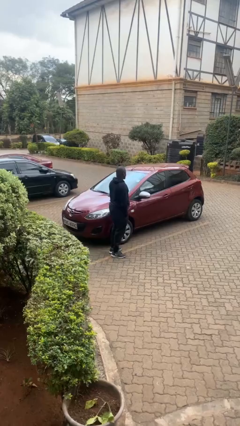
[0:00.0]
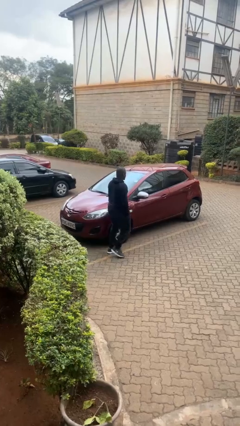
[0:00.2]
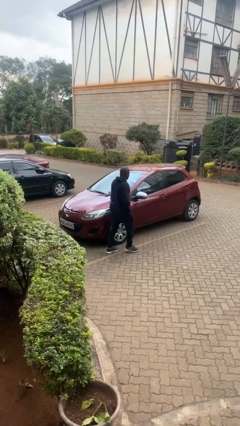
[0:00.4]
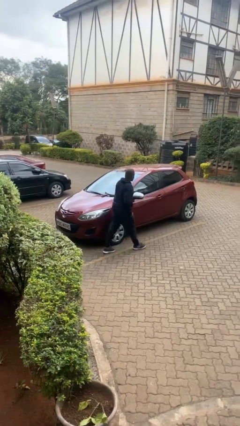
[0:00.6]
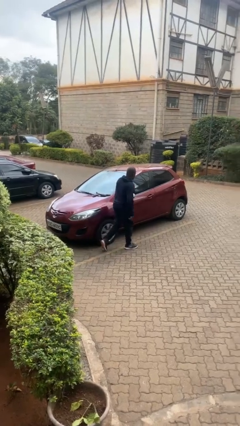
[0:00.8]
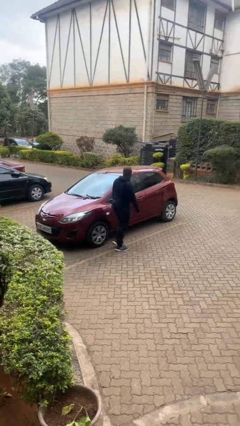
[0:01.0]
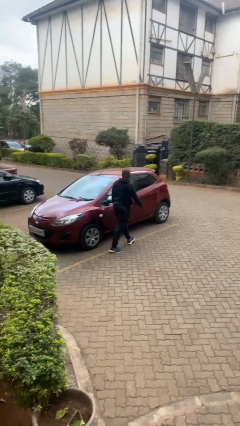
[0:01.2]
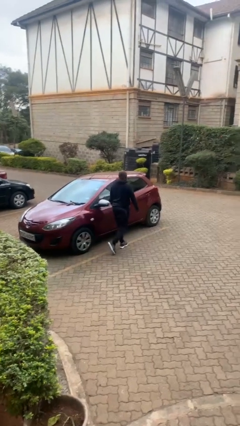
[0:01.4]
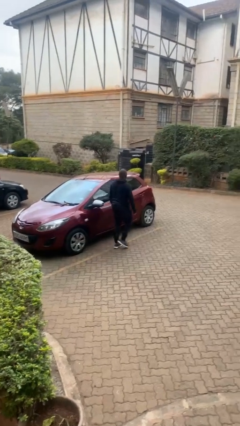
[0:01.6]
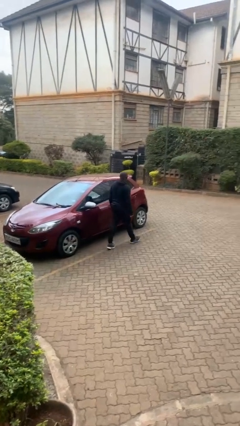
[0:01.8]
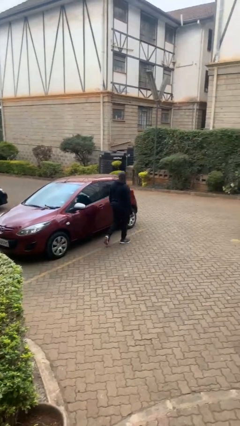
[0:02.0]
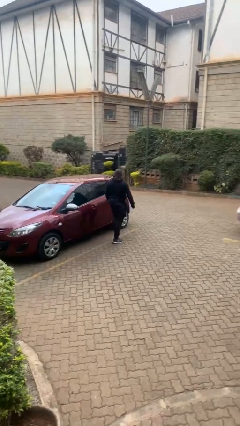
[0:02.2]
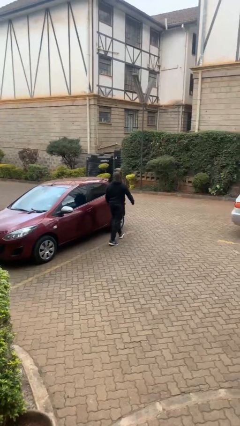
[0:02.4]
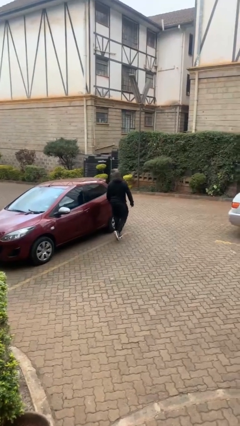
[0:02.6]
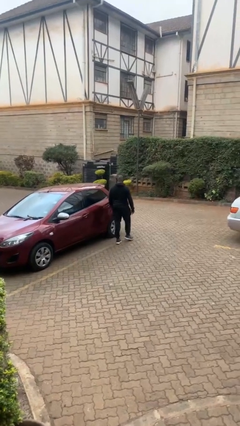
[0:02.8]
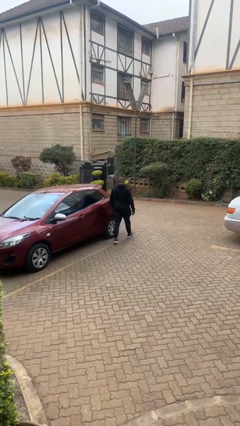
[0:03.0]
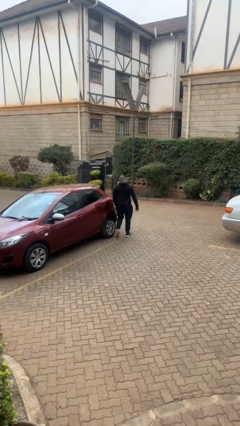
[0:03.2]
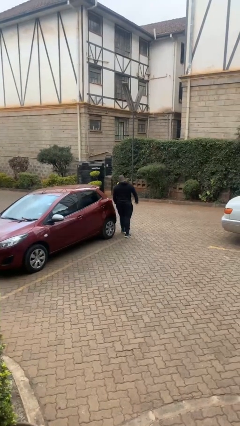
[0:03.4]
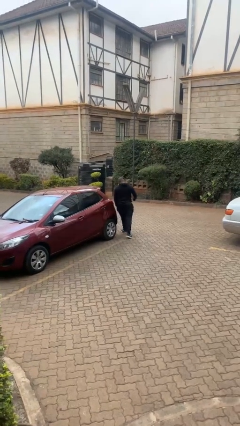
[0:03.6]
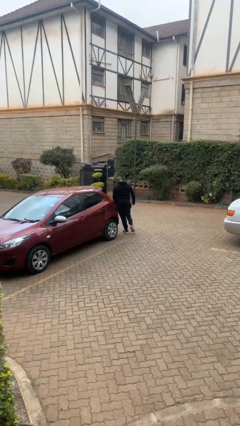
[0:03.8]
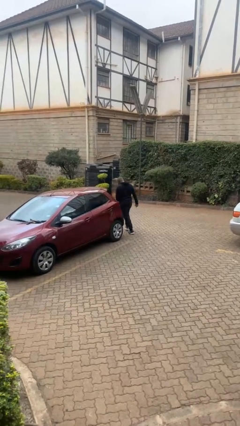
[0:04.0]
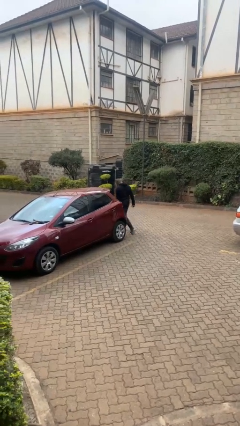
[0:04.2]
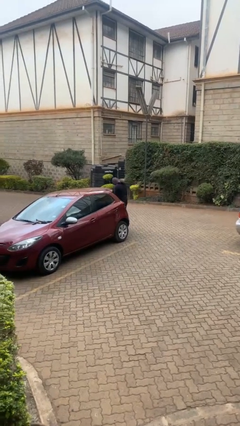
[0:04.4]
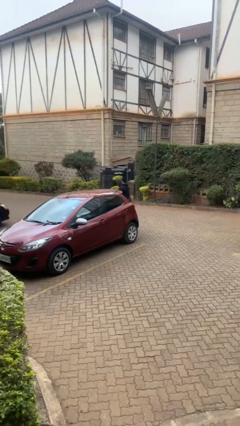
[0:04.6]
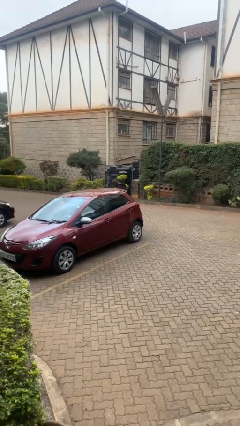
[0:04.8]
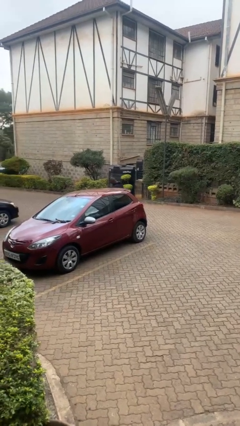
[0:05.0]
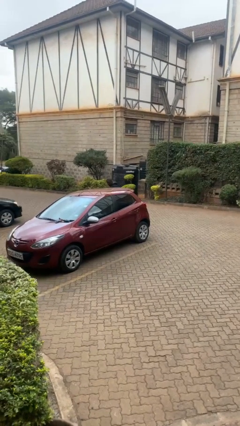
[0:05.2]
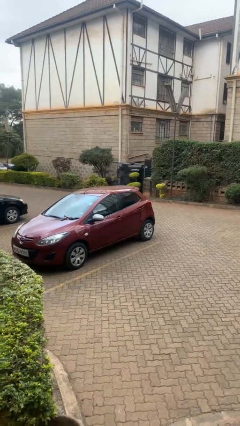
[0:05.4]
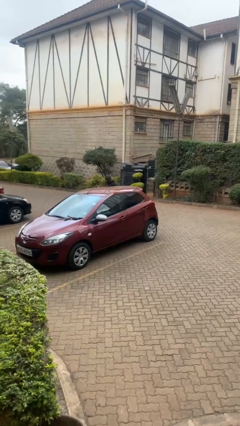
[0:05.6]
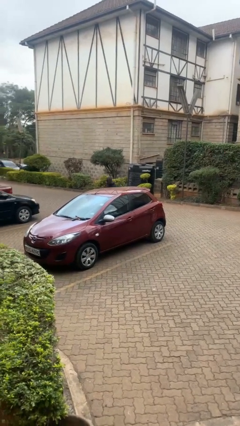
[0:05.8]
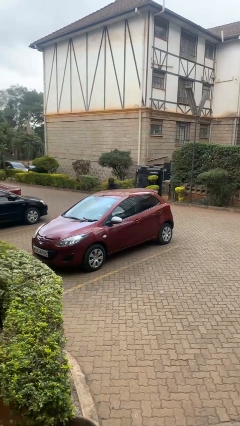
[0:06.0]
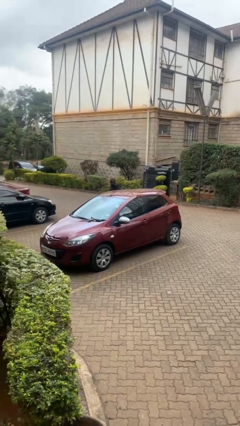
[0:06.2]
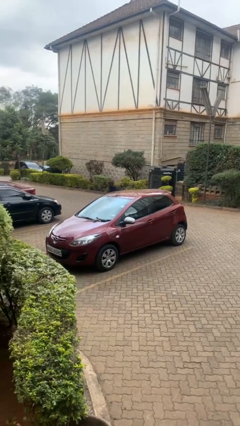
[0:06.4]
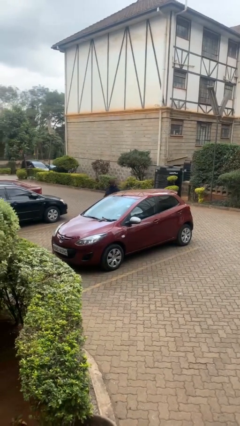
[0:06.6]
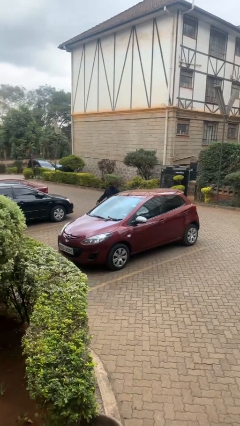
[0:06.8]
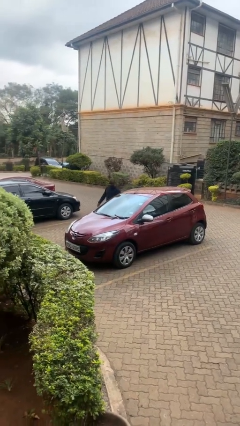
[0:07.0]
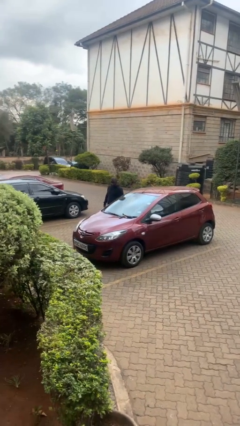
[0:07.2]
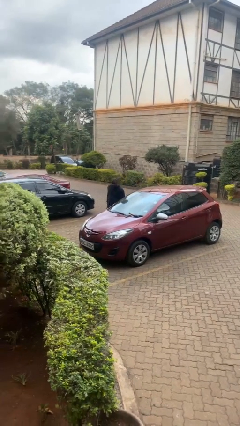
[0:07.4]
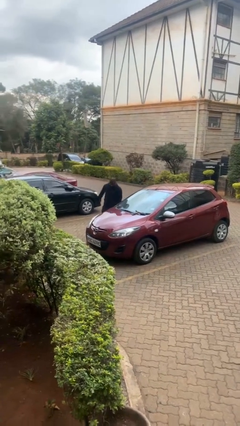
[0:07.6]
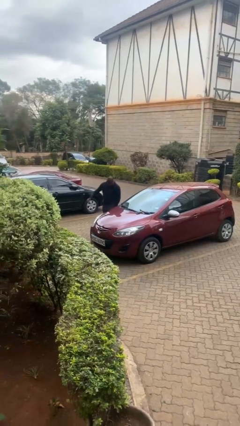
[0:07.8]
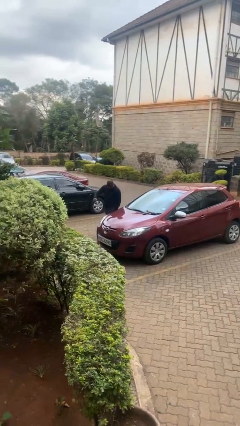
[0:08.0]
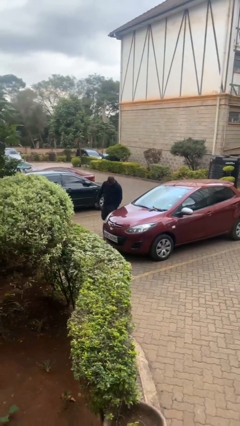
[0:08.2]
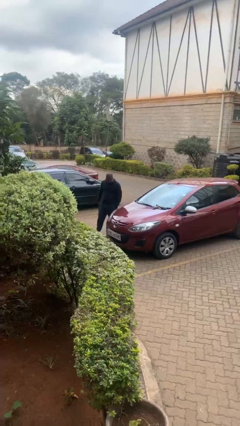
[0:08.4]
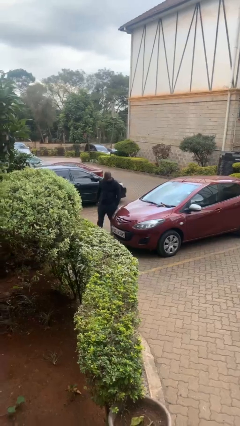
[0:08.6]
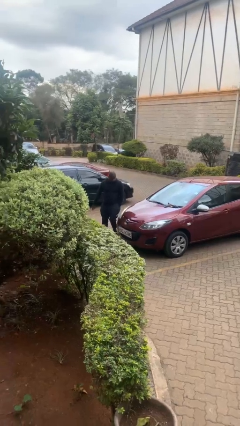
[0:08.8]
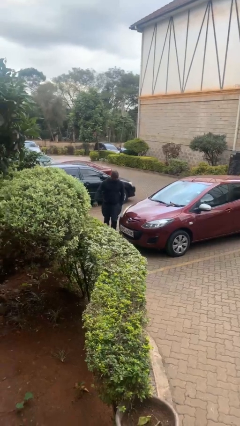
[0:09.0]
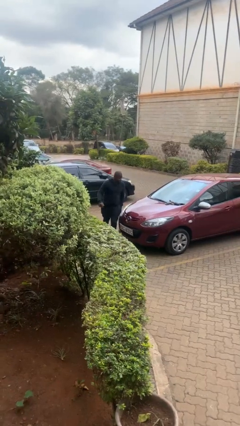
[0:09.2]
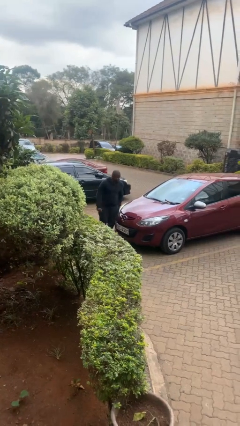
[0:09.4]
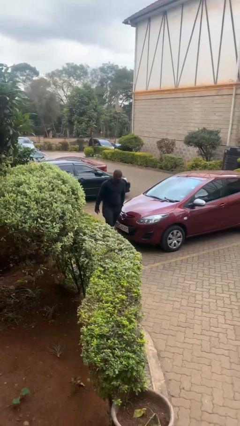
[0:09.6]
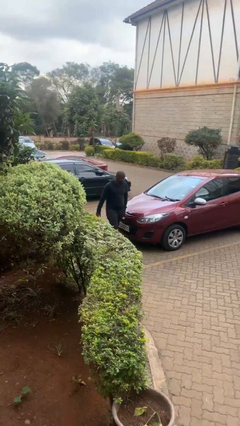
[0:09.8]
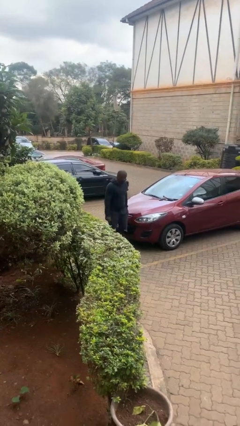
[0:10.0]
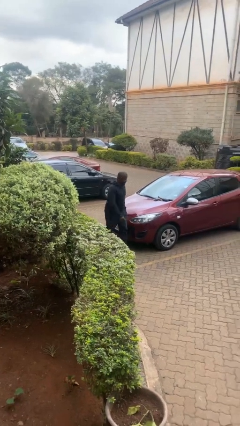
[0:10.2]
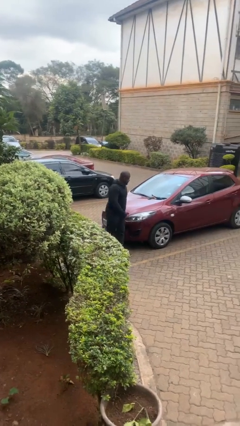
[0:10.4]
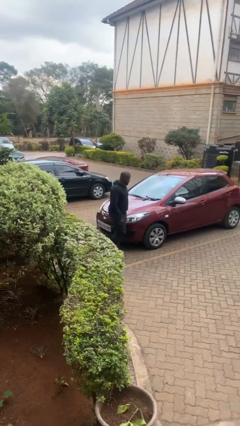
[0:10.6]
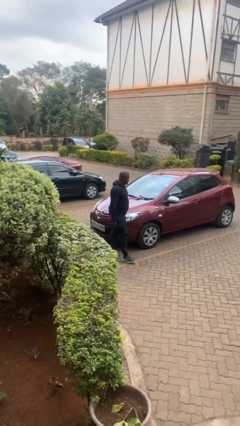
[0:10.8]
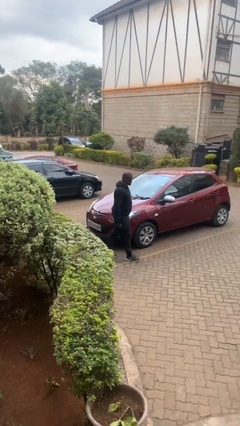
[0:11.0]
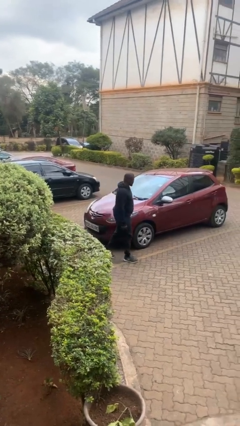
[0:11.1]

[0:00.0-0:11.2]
person walks around car

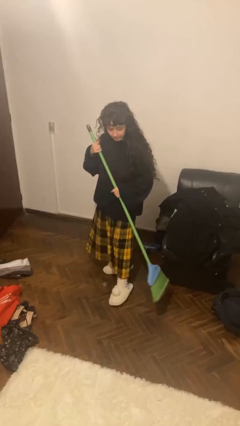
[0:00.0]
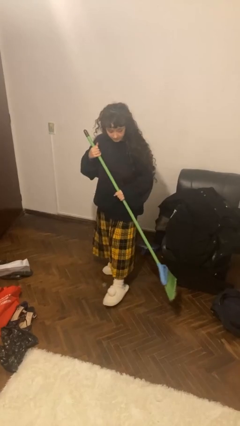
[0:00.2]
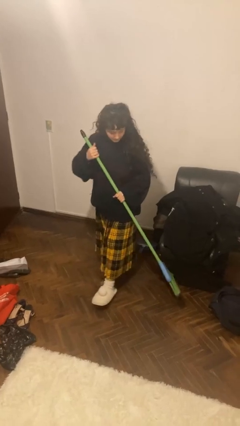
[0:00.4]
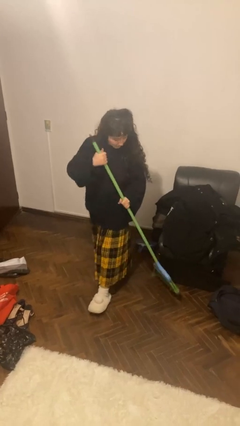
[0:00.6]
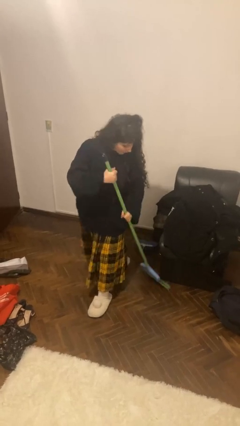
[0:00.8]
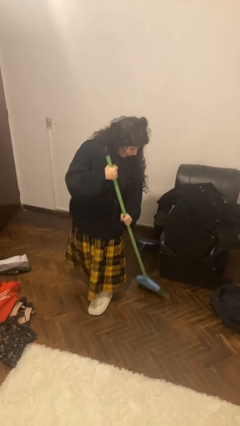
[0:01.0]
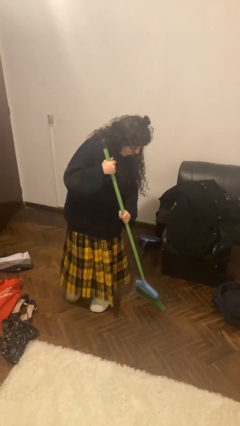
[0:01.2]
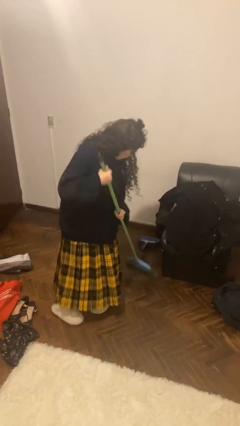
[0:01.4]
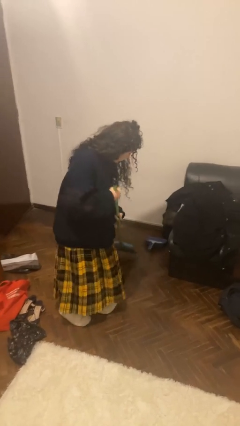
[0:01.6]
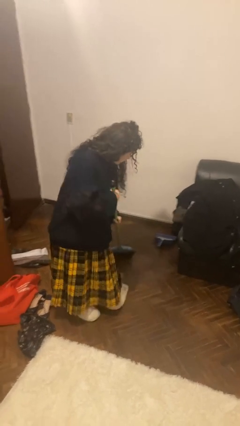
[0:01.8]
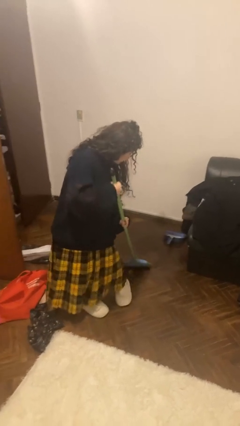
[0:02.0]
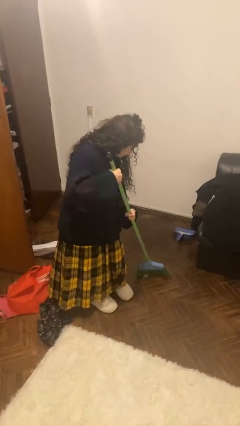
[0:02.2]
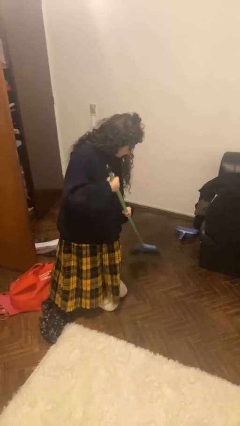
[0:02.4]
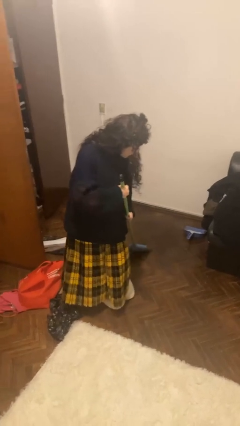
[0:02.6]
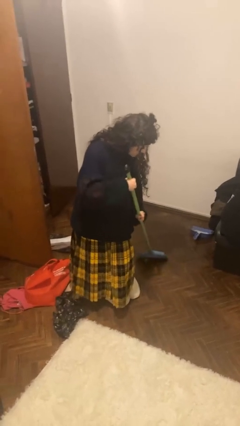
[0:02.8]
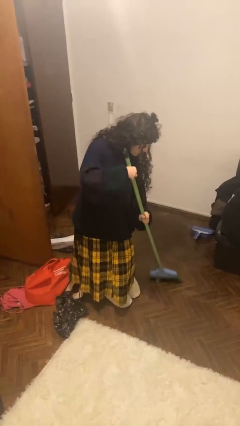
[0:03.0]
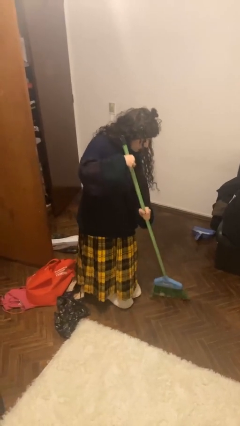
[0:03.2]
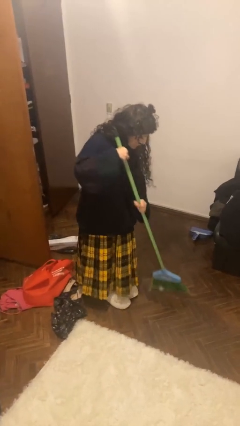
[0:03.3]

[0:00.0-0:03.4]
person sweeps floor

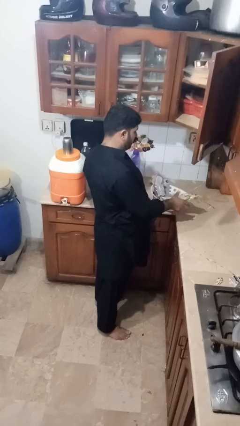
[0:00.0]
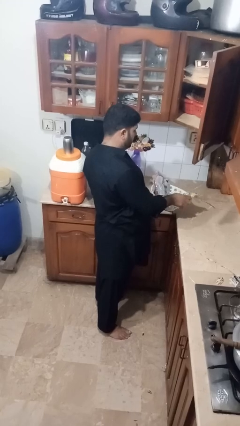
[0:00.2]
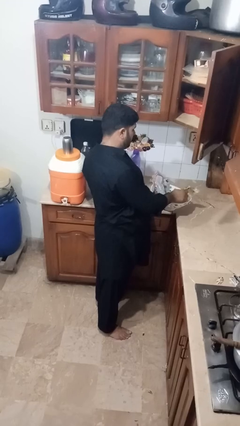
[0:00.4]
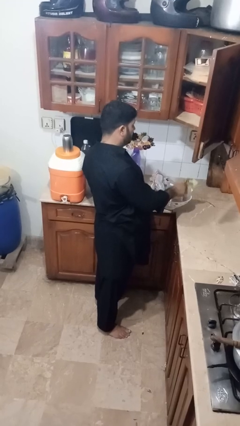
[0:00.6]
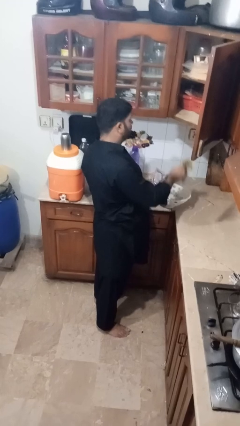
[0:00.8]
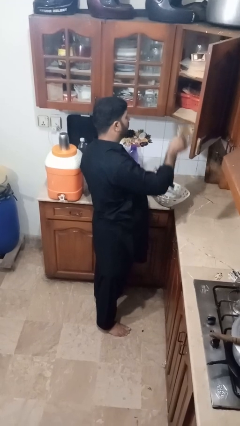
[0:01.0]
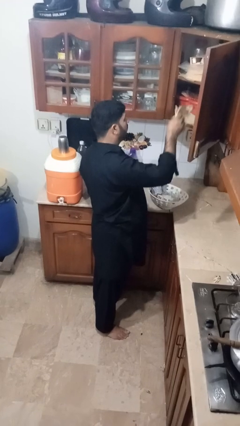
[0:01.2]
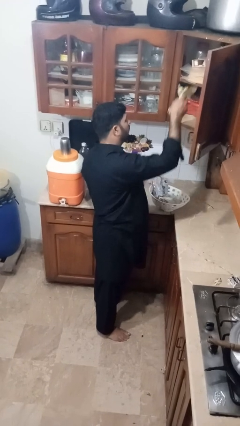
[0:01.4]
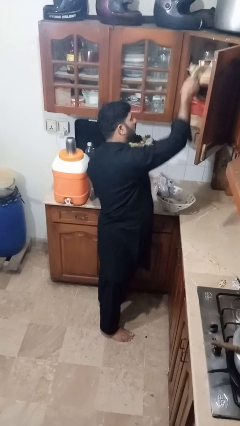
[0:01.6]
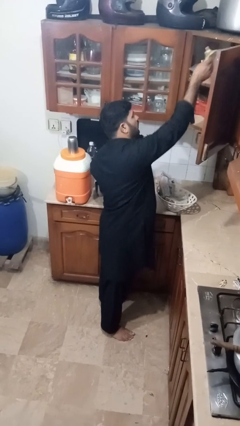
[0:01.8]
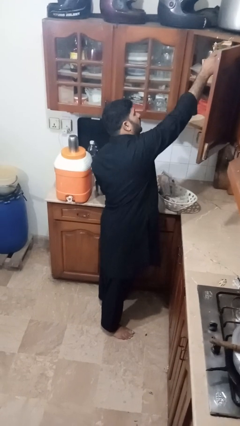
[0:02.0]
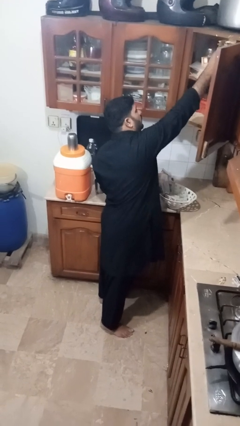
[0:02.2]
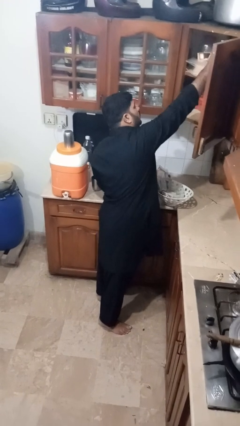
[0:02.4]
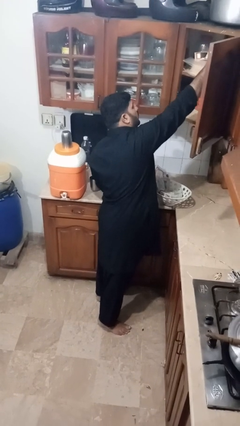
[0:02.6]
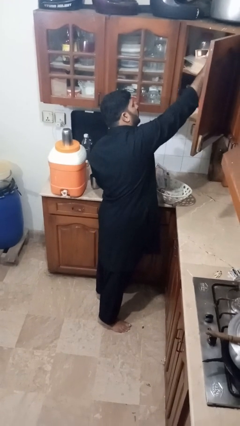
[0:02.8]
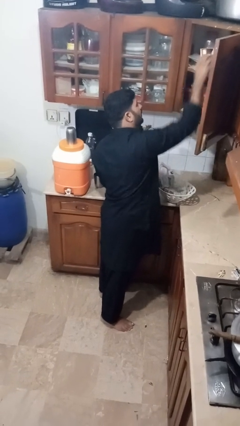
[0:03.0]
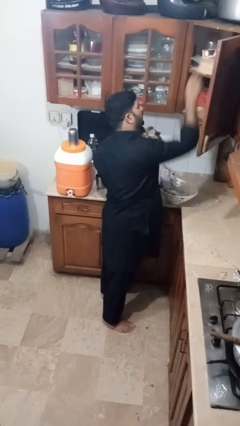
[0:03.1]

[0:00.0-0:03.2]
person loads groceries into cabinet
